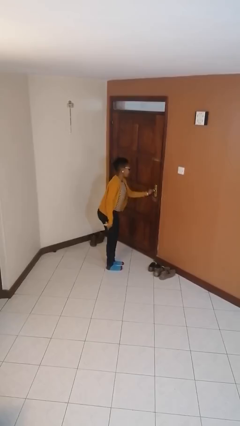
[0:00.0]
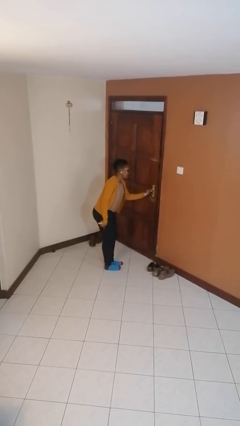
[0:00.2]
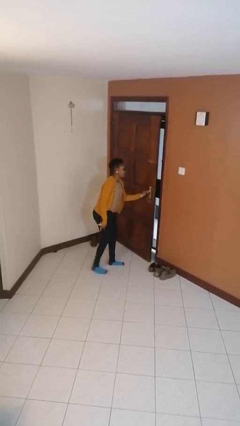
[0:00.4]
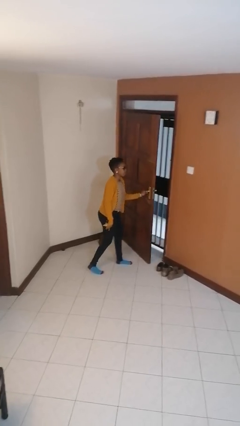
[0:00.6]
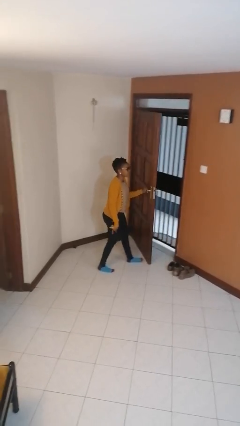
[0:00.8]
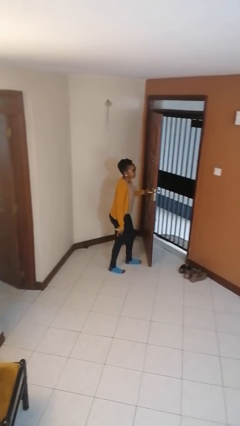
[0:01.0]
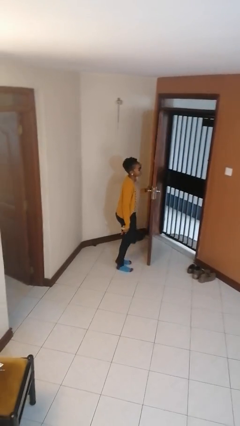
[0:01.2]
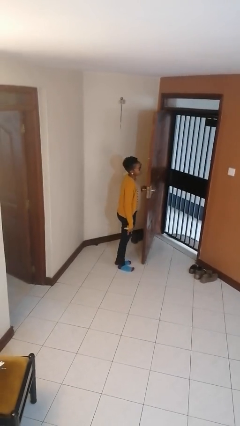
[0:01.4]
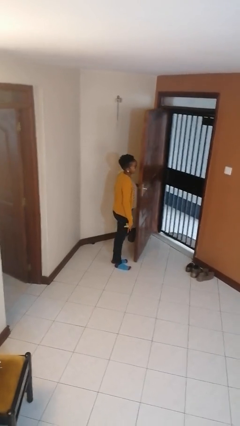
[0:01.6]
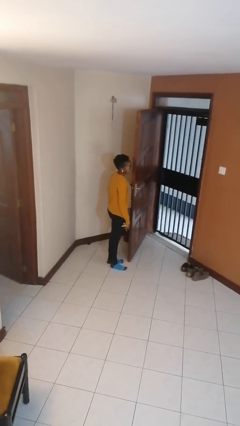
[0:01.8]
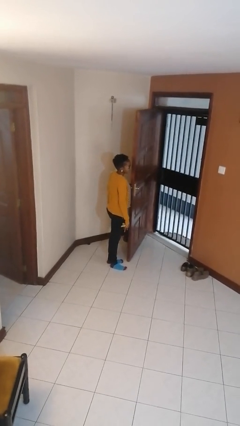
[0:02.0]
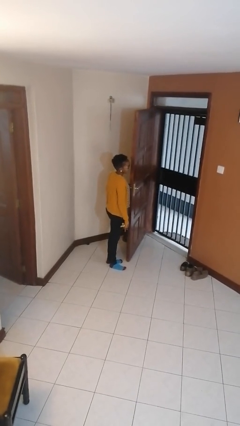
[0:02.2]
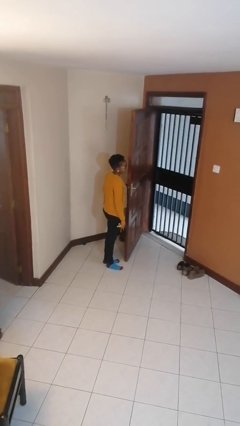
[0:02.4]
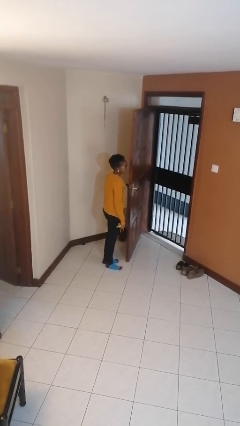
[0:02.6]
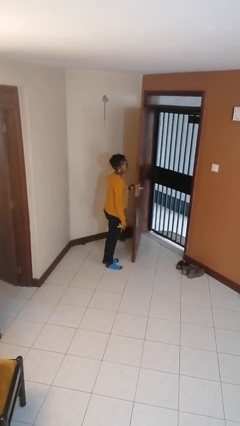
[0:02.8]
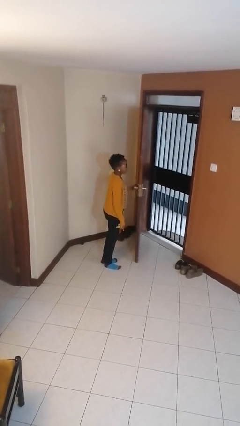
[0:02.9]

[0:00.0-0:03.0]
person opens facility door

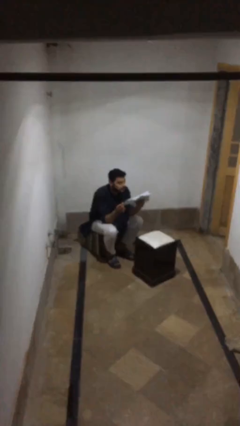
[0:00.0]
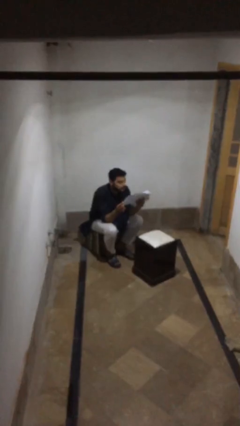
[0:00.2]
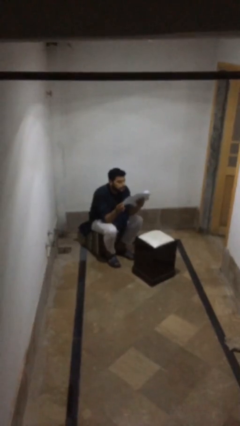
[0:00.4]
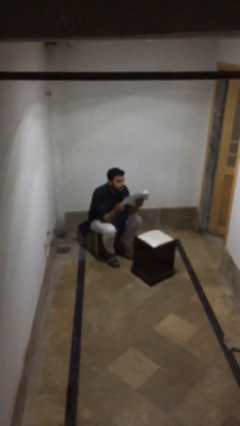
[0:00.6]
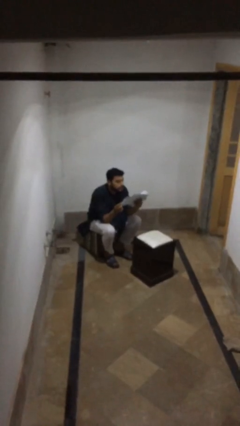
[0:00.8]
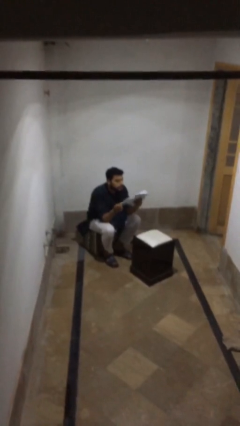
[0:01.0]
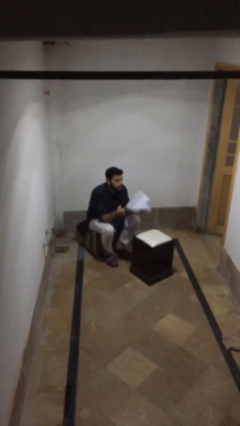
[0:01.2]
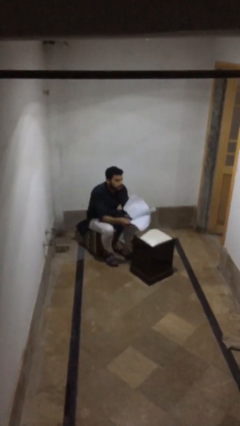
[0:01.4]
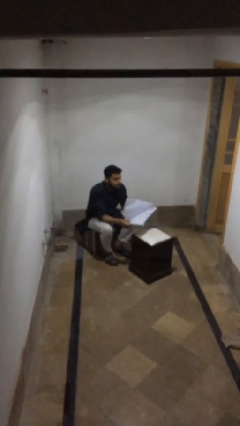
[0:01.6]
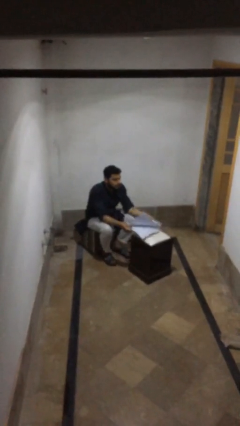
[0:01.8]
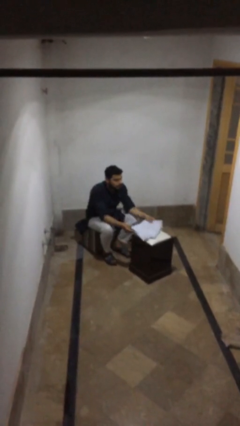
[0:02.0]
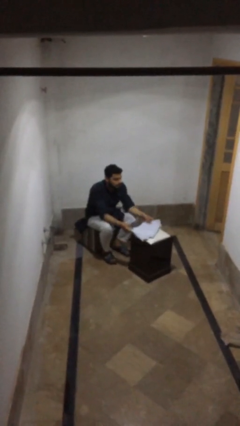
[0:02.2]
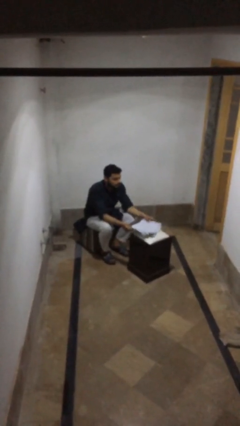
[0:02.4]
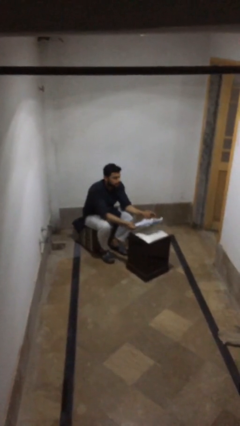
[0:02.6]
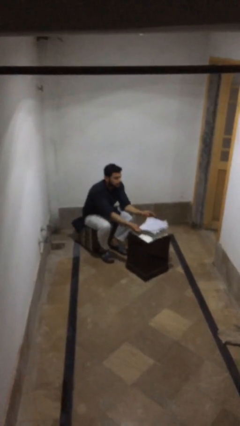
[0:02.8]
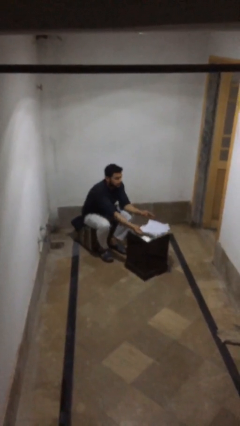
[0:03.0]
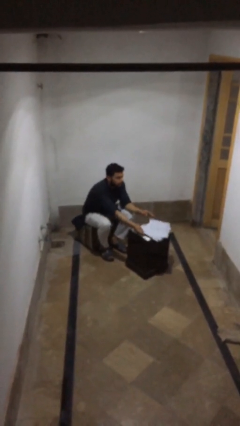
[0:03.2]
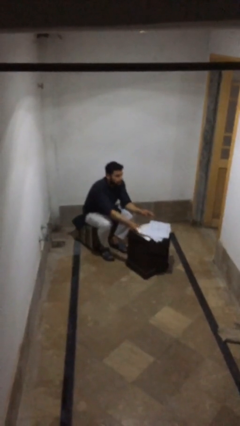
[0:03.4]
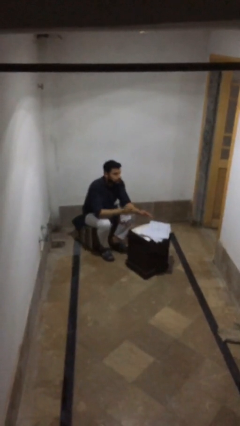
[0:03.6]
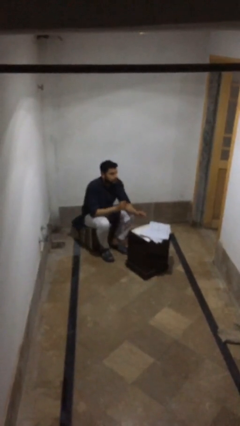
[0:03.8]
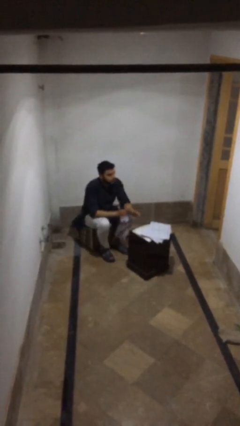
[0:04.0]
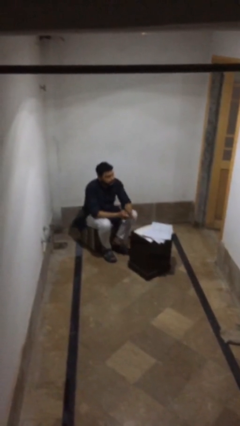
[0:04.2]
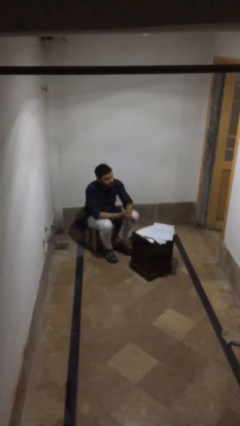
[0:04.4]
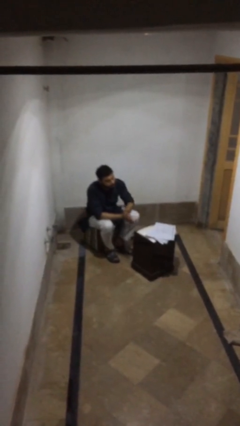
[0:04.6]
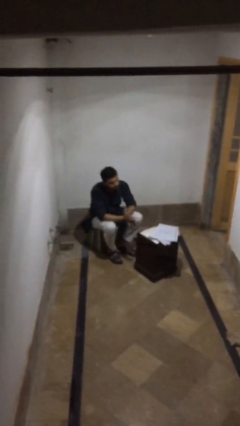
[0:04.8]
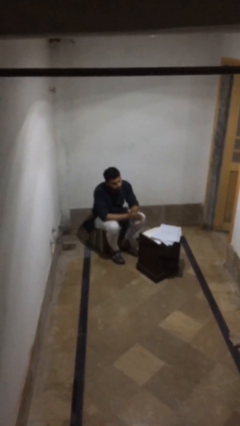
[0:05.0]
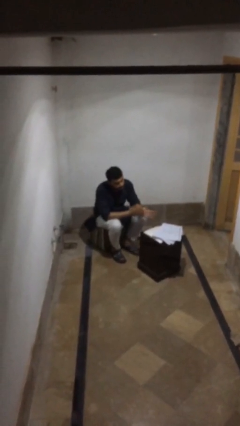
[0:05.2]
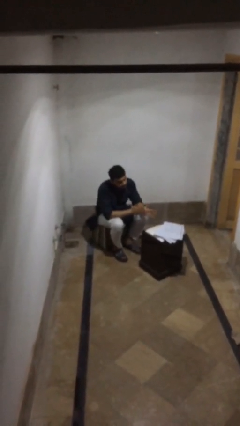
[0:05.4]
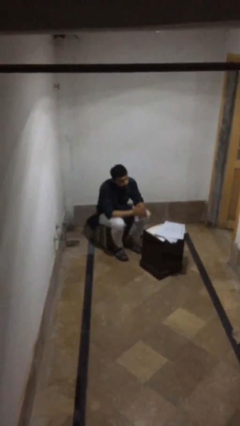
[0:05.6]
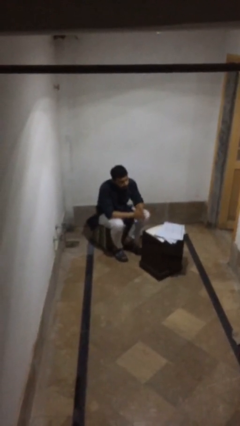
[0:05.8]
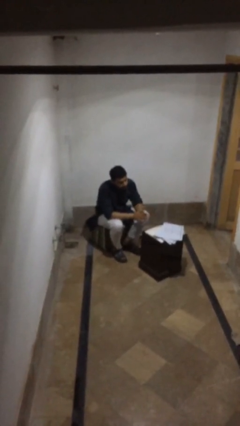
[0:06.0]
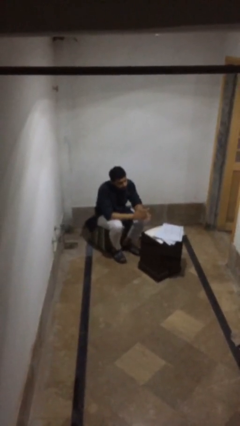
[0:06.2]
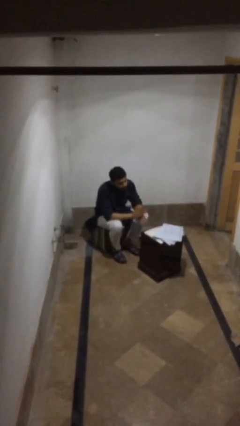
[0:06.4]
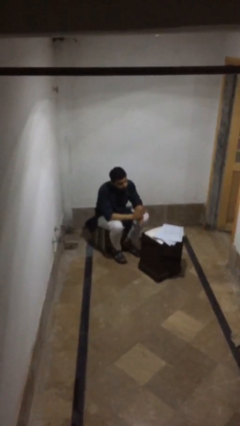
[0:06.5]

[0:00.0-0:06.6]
person puts down object on table

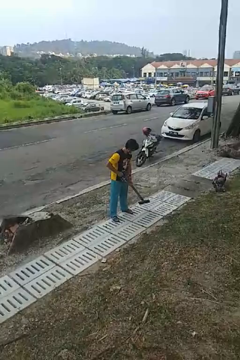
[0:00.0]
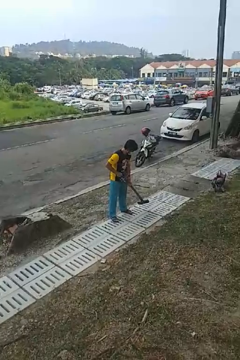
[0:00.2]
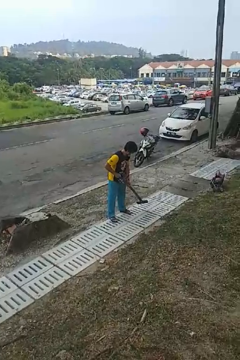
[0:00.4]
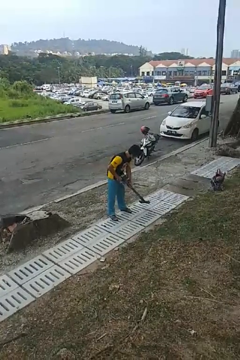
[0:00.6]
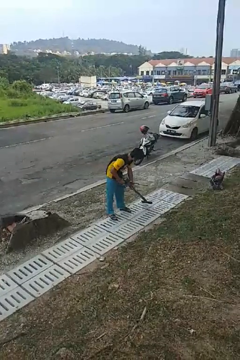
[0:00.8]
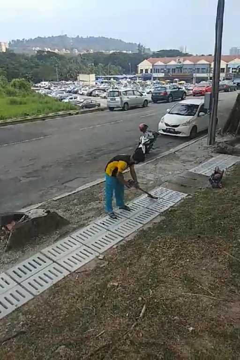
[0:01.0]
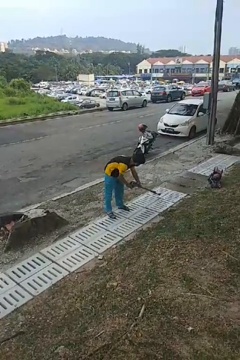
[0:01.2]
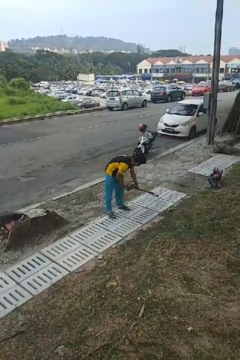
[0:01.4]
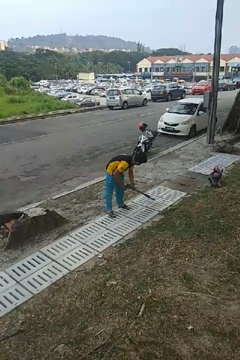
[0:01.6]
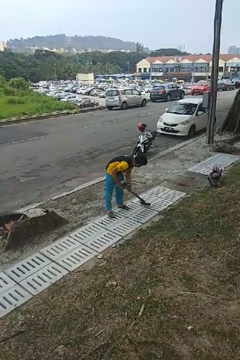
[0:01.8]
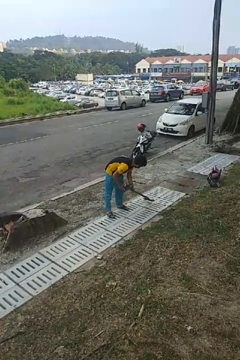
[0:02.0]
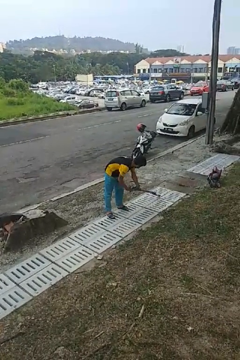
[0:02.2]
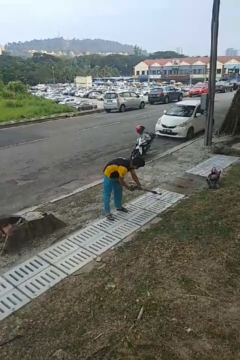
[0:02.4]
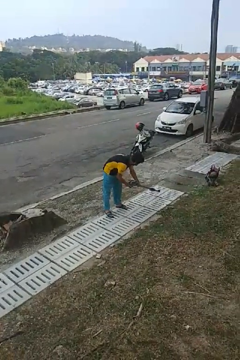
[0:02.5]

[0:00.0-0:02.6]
person vacuums carpet

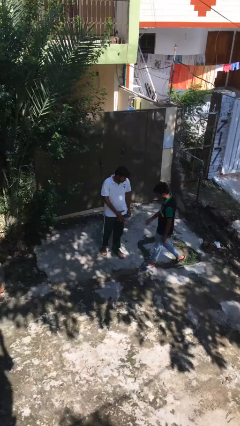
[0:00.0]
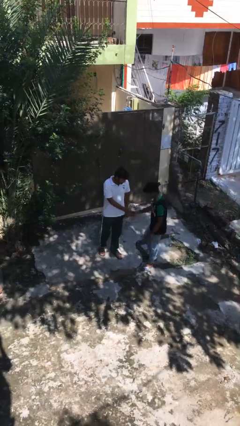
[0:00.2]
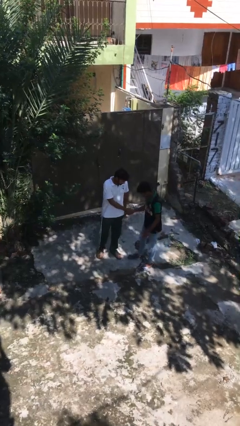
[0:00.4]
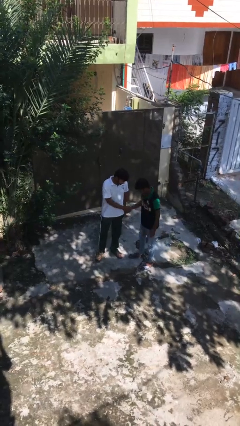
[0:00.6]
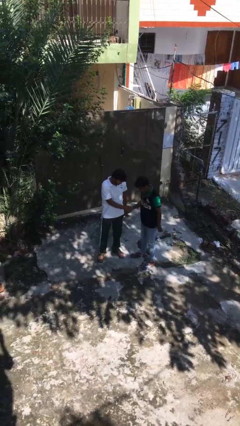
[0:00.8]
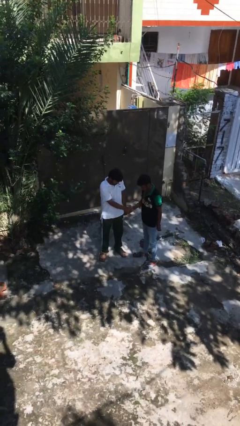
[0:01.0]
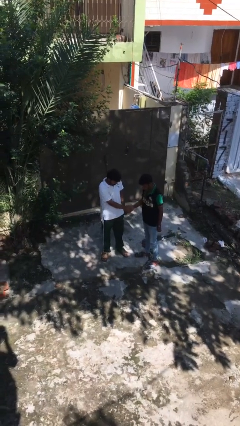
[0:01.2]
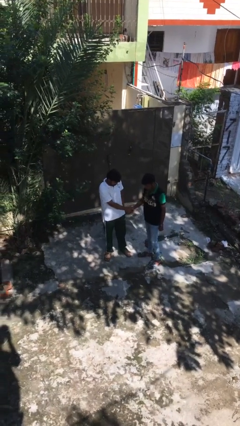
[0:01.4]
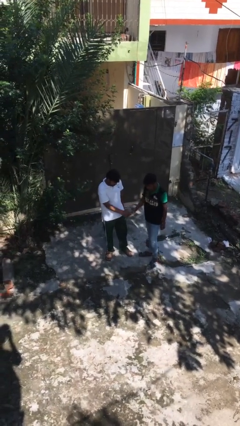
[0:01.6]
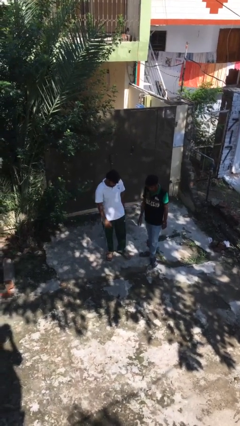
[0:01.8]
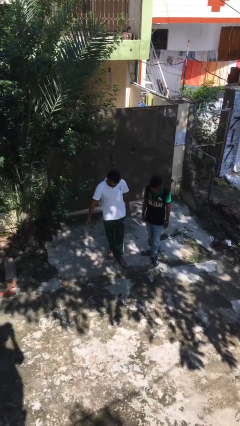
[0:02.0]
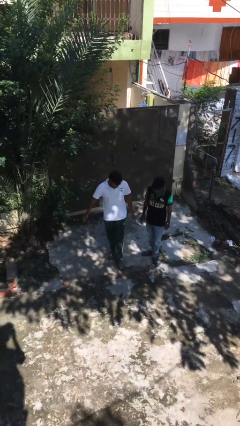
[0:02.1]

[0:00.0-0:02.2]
person shakes hand

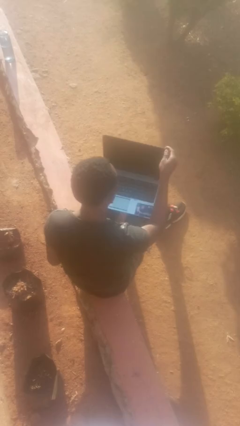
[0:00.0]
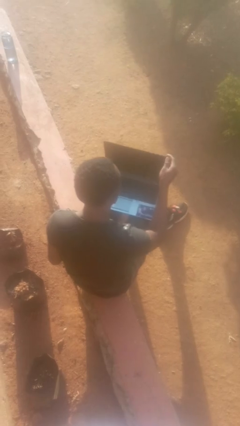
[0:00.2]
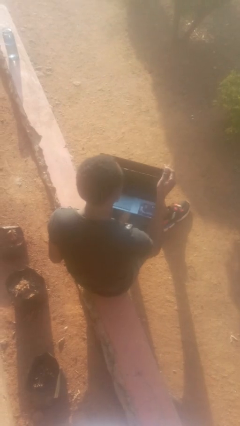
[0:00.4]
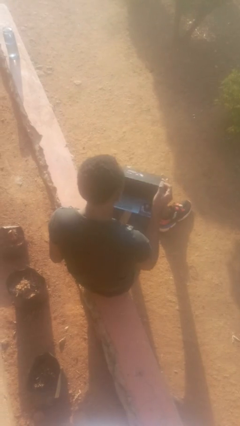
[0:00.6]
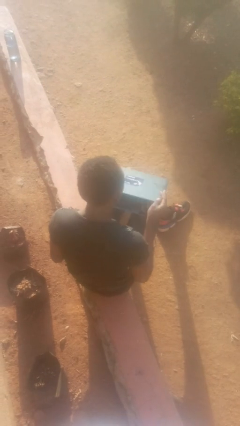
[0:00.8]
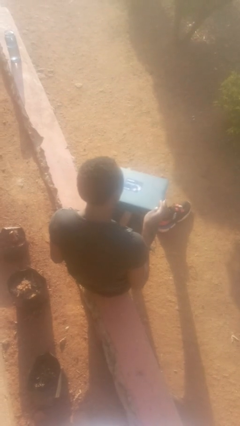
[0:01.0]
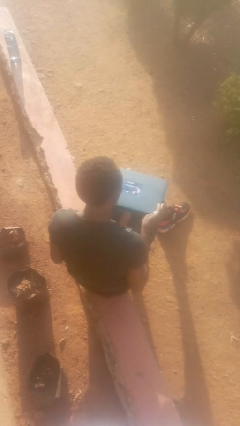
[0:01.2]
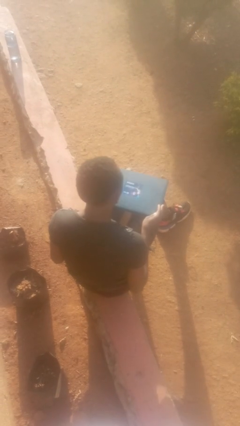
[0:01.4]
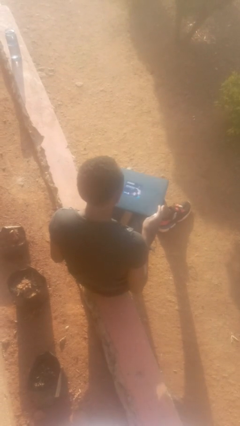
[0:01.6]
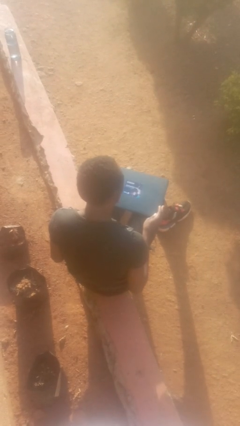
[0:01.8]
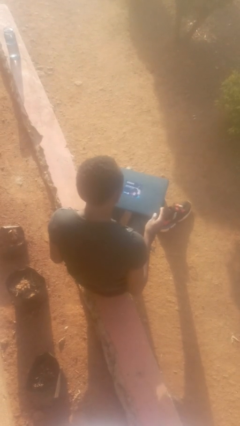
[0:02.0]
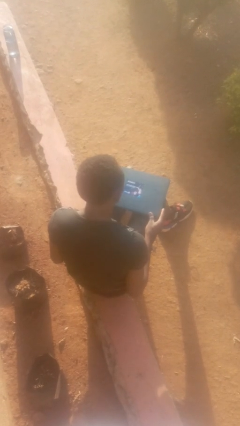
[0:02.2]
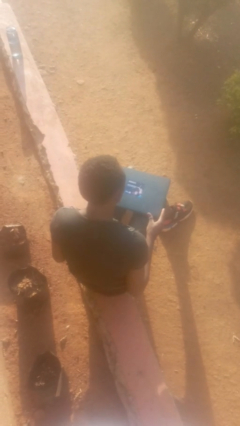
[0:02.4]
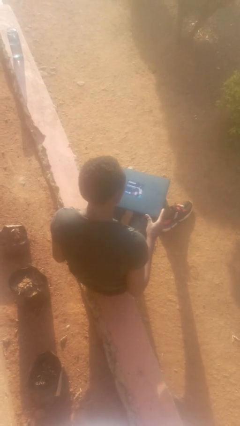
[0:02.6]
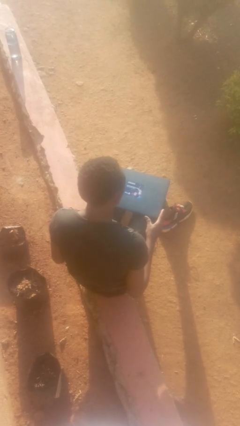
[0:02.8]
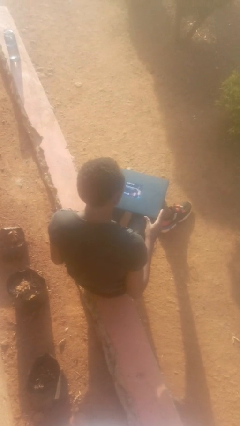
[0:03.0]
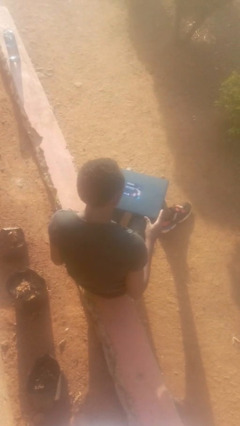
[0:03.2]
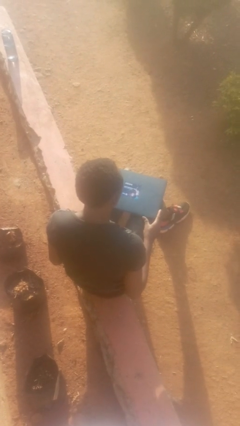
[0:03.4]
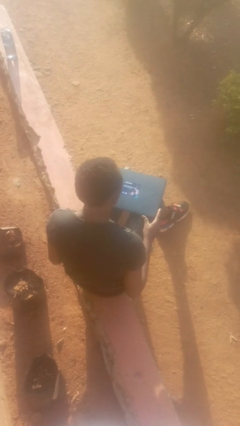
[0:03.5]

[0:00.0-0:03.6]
person closes laptop
